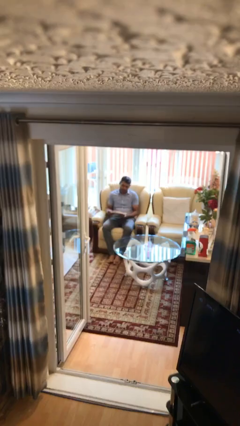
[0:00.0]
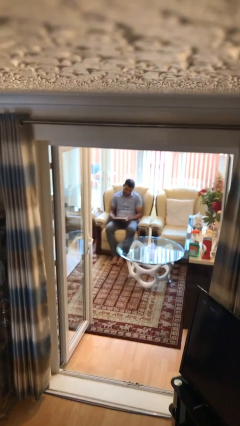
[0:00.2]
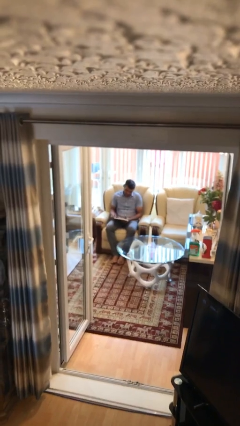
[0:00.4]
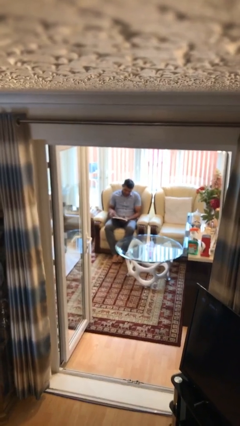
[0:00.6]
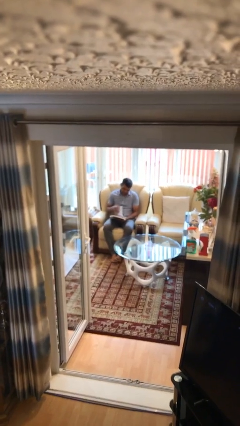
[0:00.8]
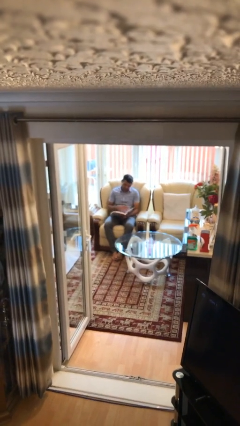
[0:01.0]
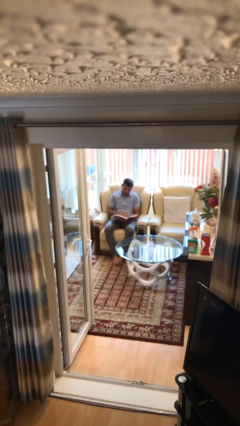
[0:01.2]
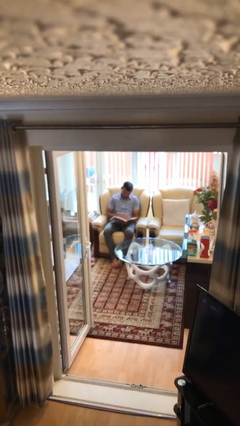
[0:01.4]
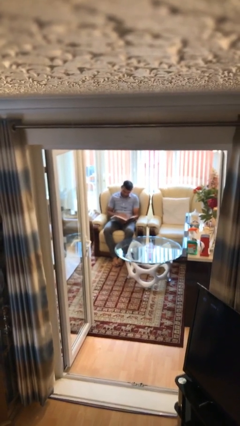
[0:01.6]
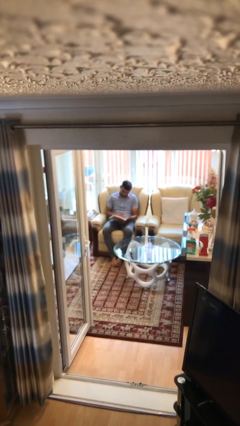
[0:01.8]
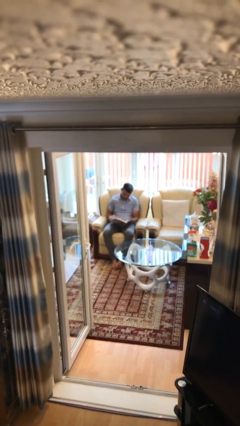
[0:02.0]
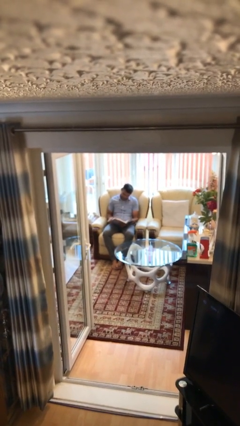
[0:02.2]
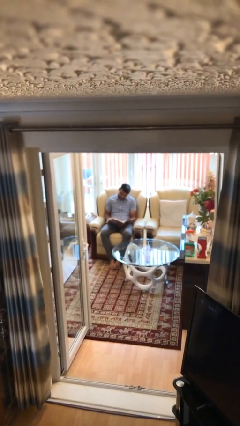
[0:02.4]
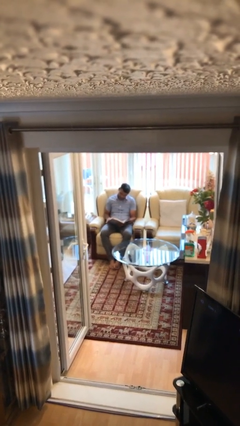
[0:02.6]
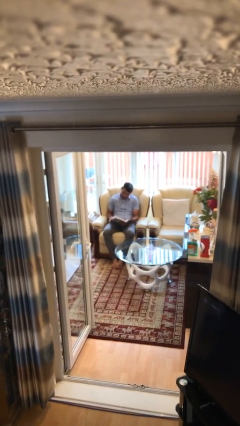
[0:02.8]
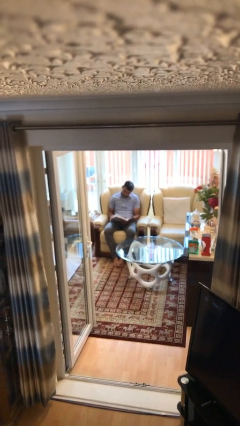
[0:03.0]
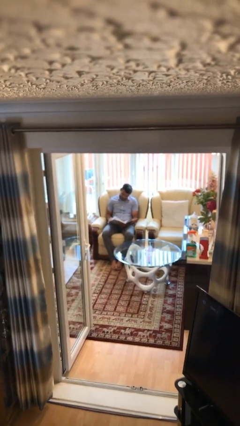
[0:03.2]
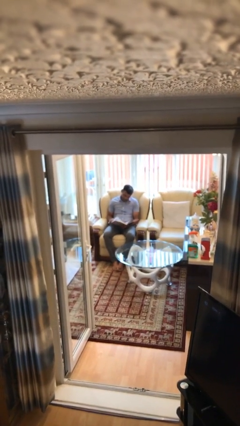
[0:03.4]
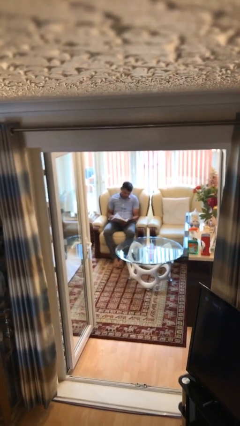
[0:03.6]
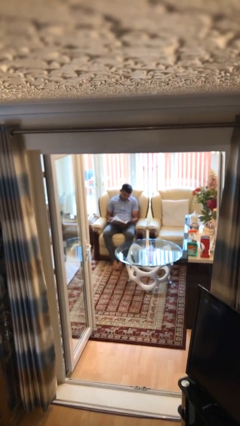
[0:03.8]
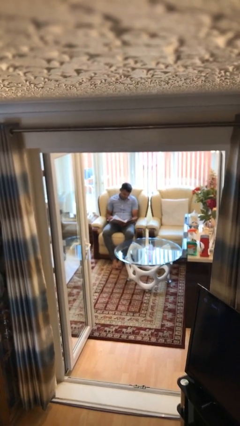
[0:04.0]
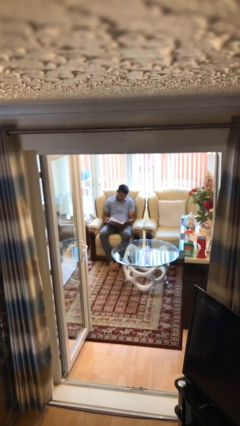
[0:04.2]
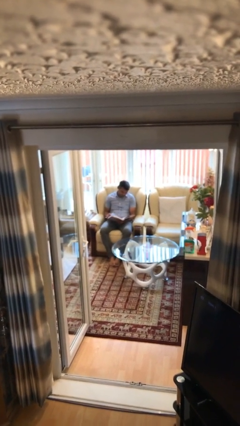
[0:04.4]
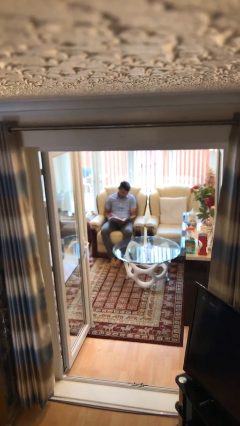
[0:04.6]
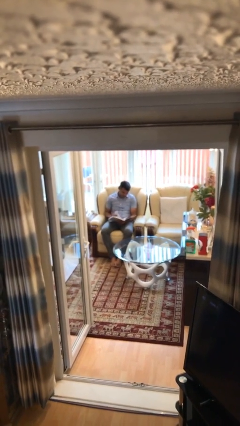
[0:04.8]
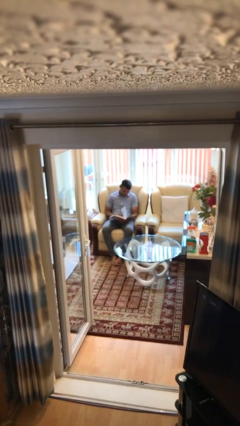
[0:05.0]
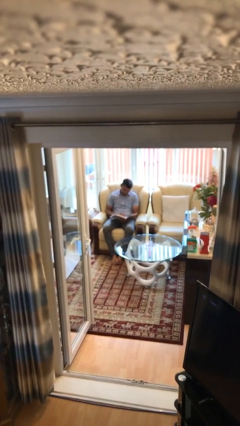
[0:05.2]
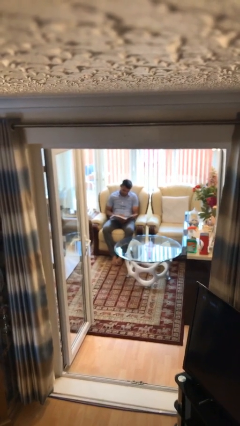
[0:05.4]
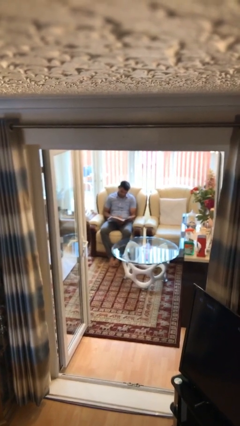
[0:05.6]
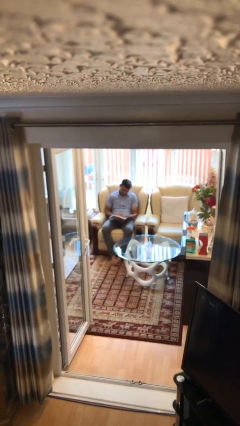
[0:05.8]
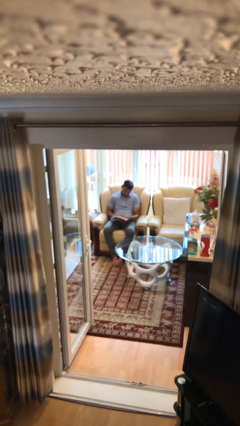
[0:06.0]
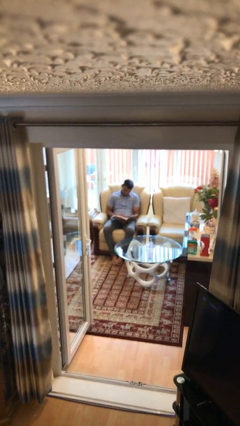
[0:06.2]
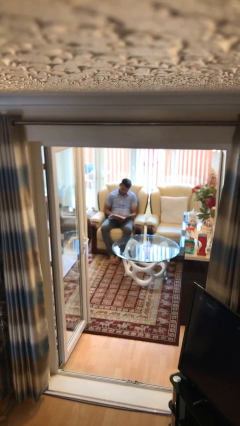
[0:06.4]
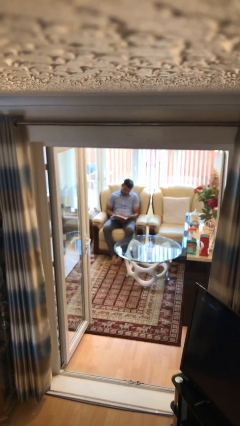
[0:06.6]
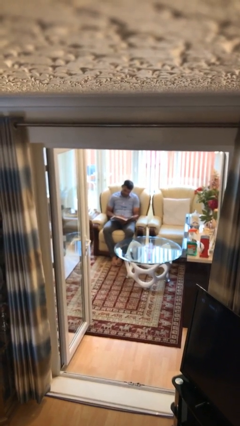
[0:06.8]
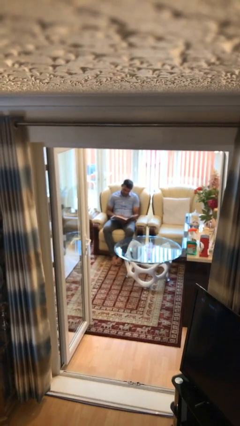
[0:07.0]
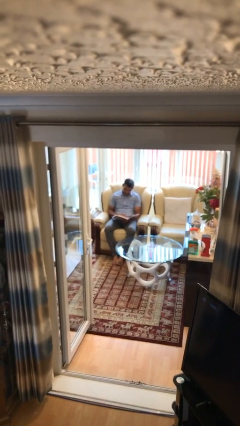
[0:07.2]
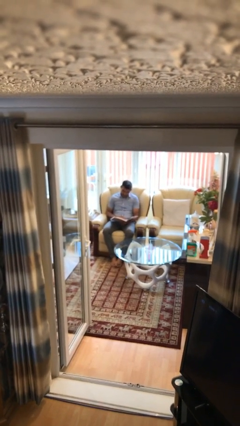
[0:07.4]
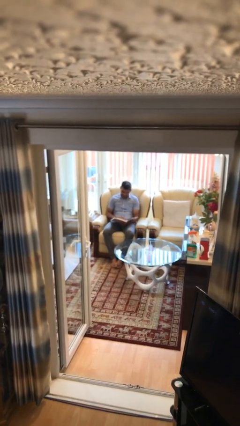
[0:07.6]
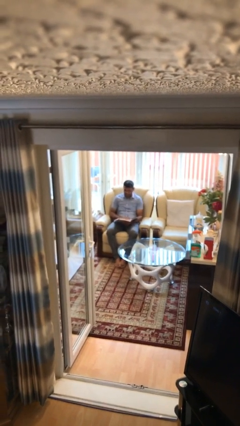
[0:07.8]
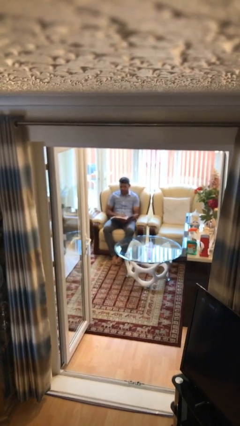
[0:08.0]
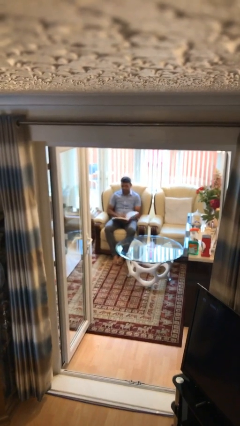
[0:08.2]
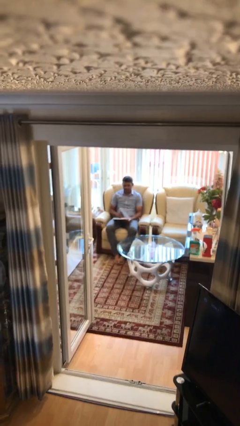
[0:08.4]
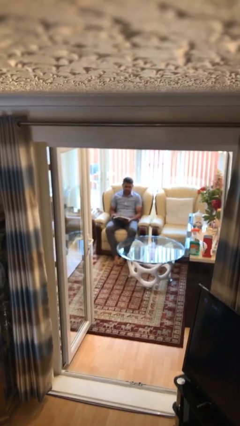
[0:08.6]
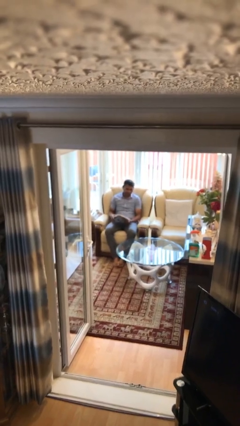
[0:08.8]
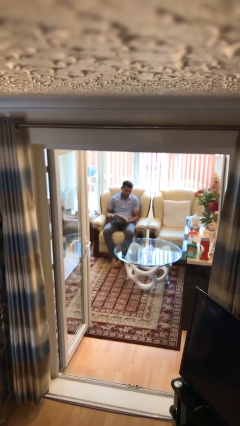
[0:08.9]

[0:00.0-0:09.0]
person reads document

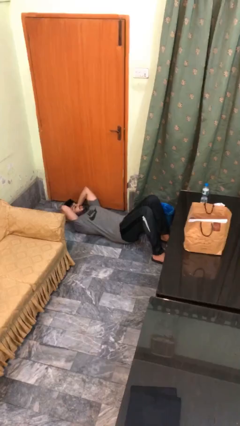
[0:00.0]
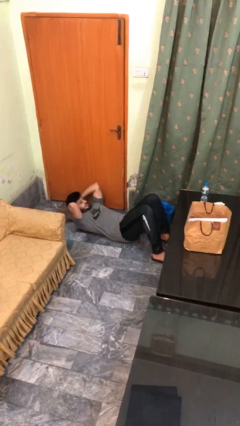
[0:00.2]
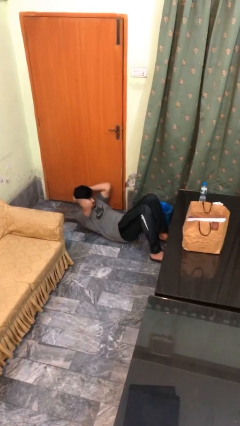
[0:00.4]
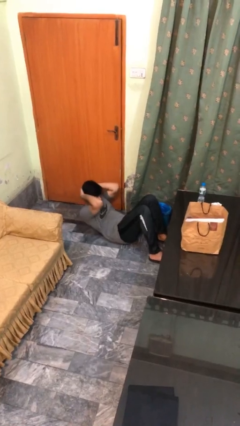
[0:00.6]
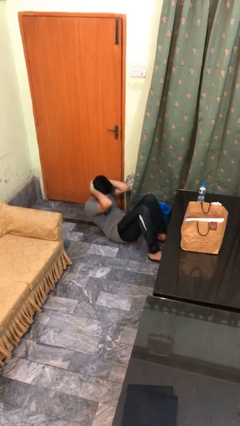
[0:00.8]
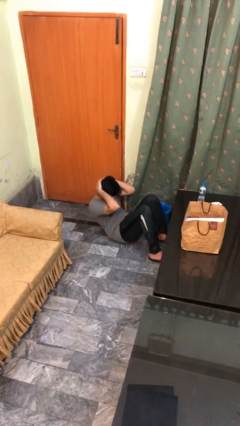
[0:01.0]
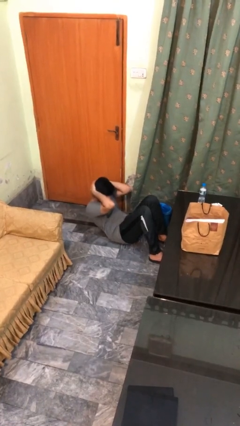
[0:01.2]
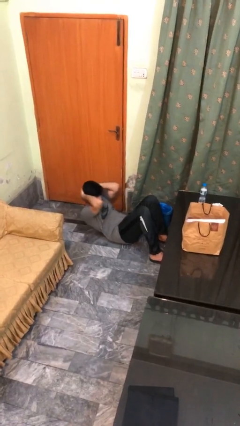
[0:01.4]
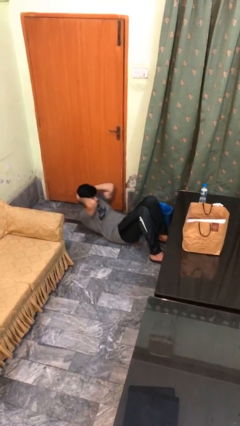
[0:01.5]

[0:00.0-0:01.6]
person exercises with situp

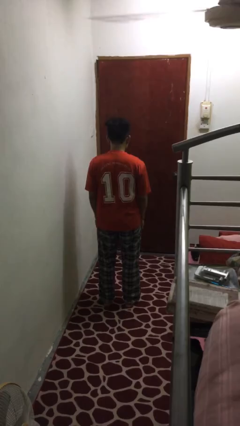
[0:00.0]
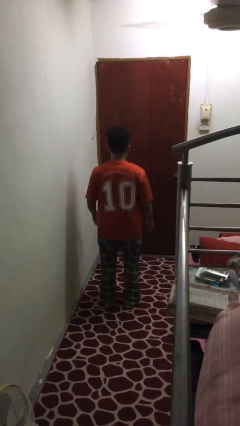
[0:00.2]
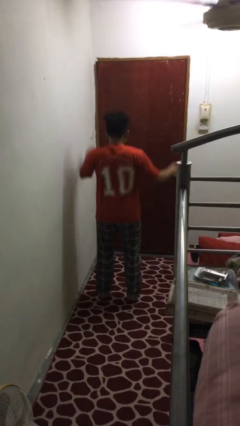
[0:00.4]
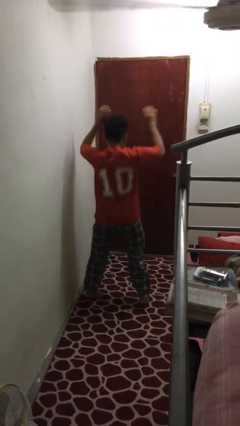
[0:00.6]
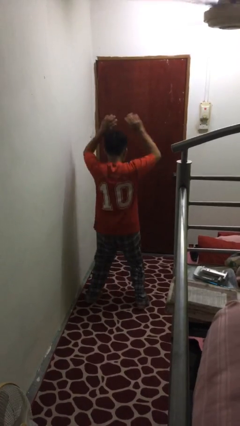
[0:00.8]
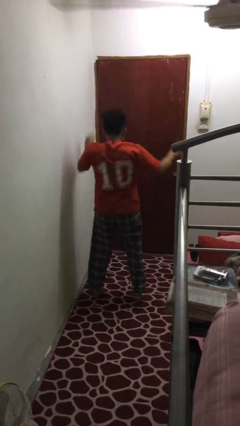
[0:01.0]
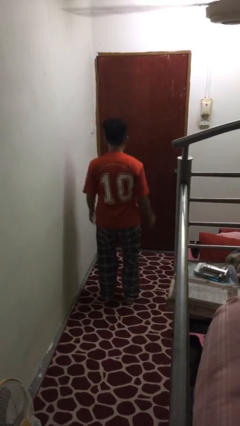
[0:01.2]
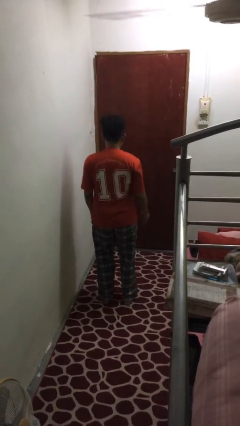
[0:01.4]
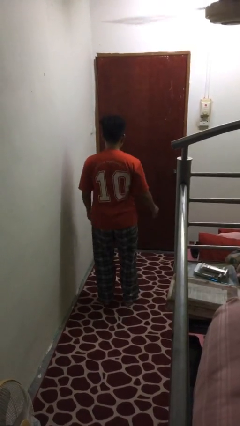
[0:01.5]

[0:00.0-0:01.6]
person exercises with jumping jacks

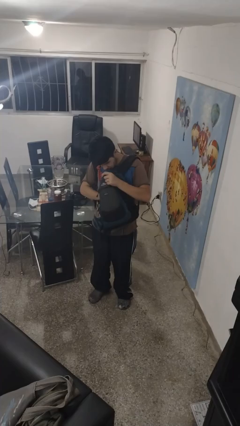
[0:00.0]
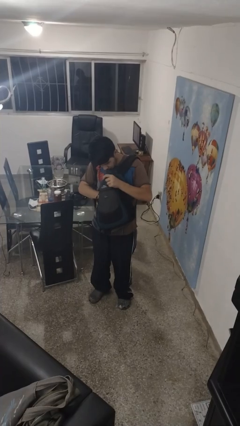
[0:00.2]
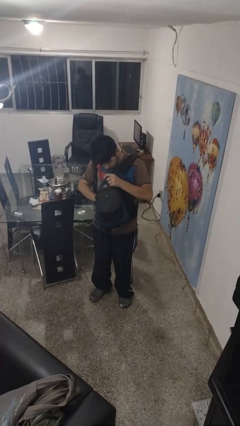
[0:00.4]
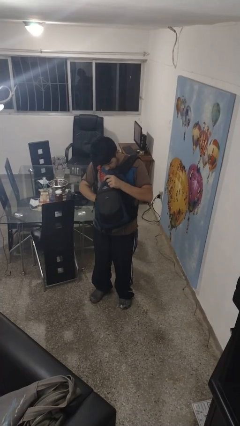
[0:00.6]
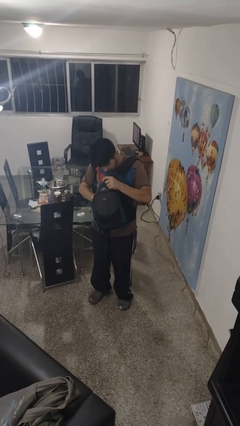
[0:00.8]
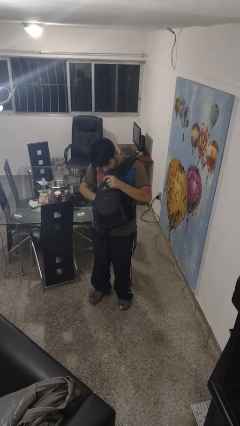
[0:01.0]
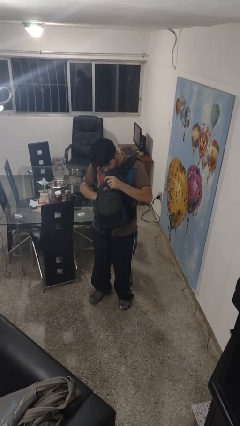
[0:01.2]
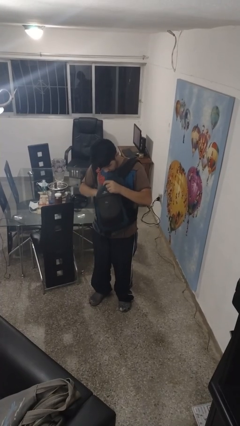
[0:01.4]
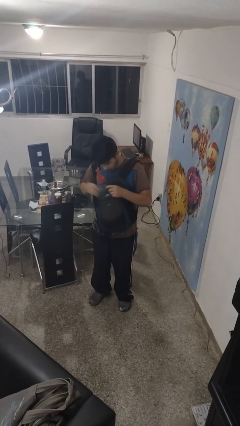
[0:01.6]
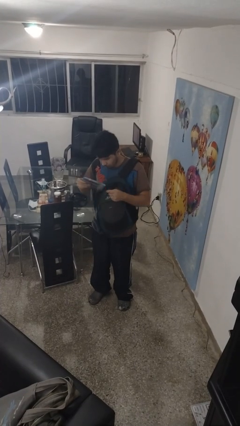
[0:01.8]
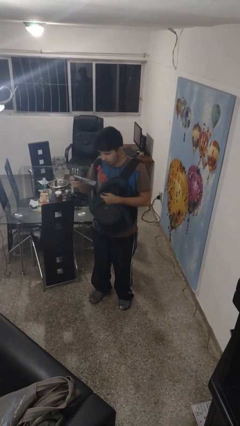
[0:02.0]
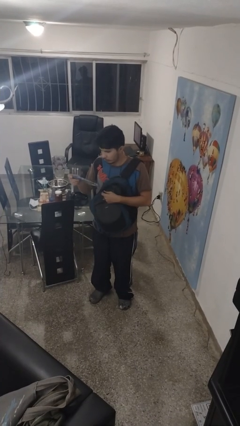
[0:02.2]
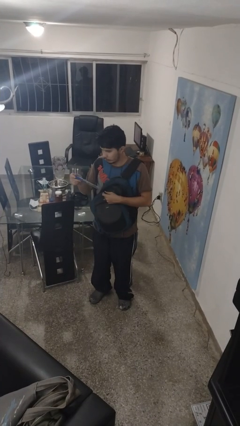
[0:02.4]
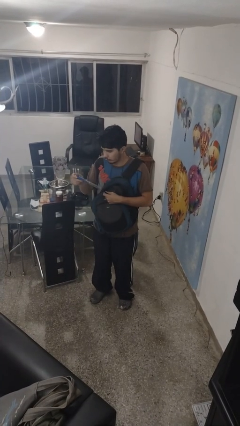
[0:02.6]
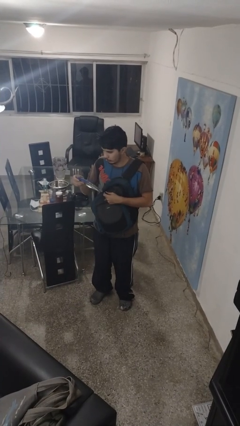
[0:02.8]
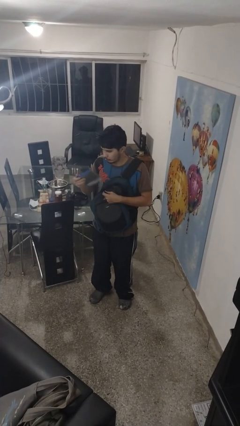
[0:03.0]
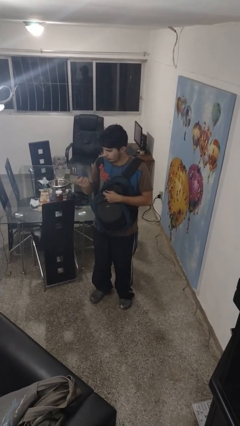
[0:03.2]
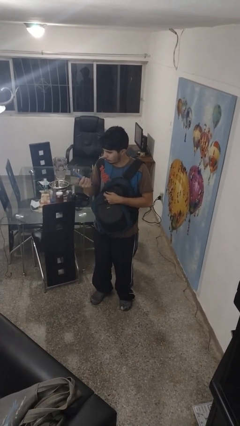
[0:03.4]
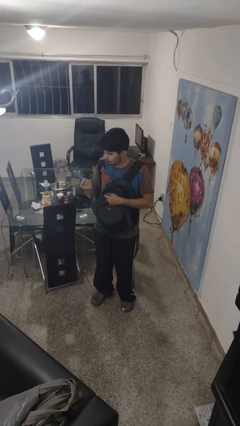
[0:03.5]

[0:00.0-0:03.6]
person takes object from backpack

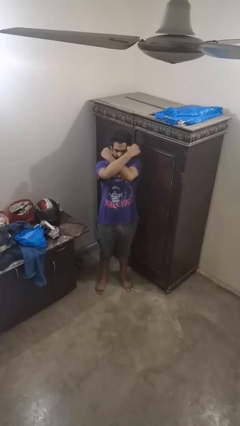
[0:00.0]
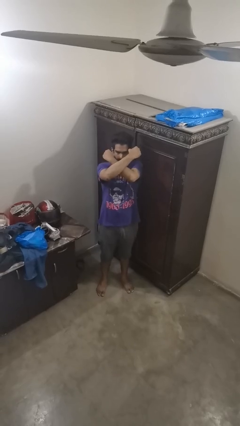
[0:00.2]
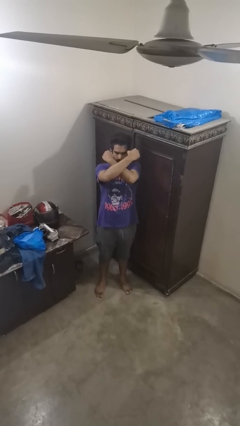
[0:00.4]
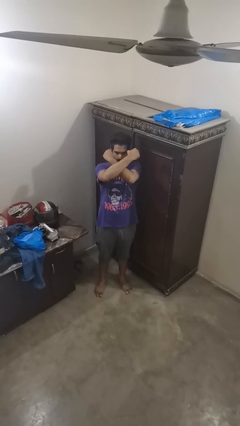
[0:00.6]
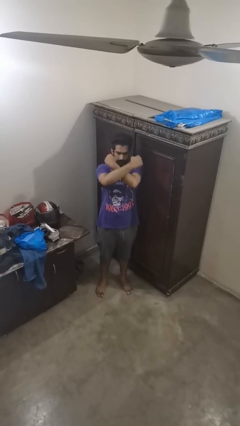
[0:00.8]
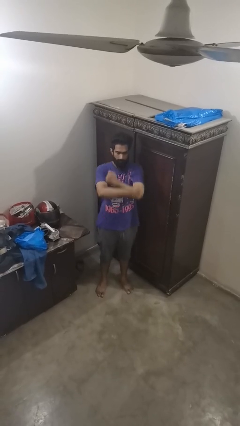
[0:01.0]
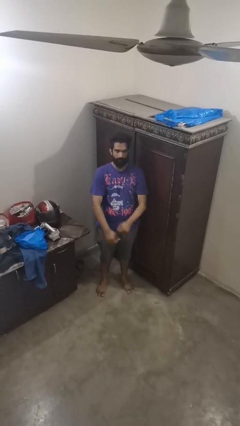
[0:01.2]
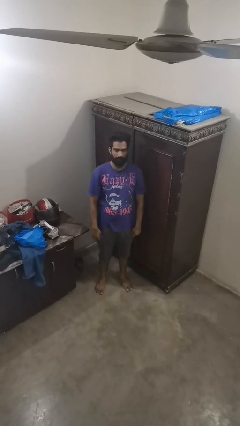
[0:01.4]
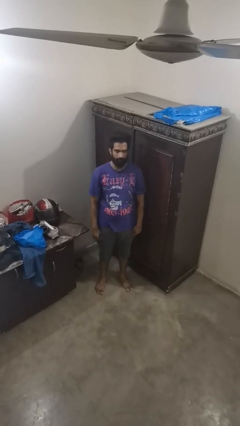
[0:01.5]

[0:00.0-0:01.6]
person gestures arms x

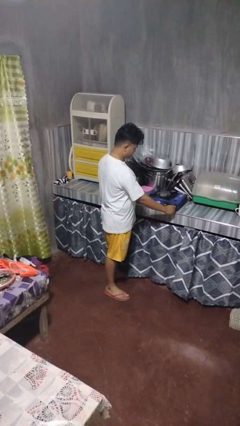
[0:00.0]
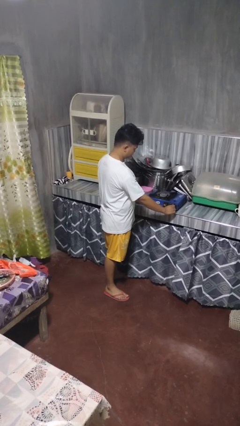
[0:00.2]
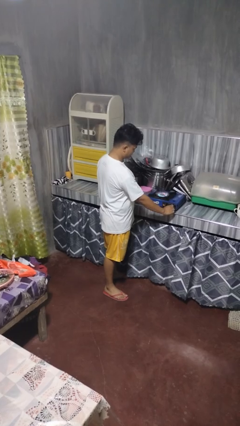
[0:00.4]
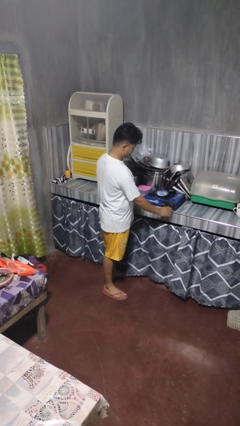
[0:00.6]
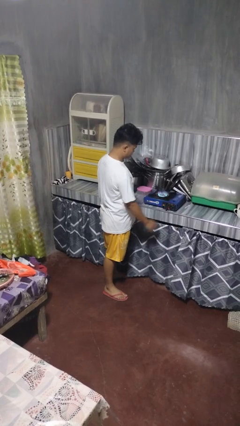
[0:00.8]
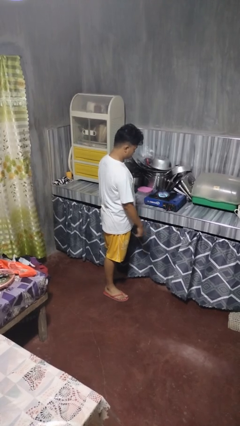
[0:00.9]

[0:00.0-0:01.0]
person turns on stovetop
